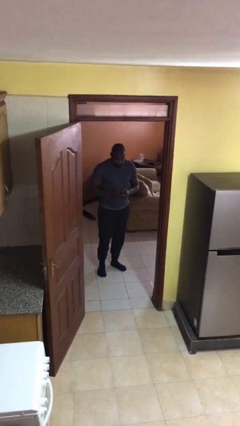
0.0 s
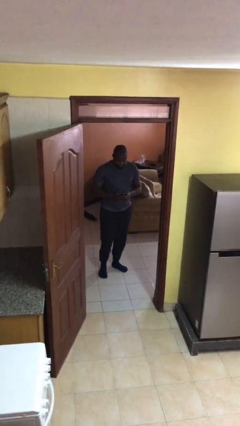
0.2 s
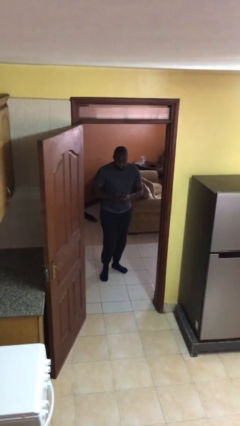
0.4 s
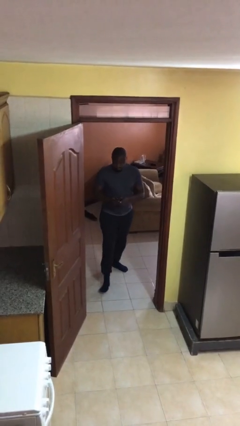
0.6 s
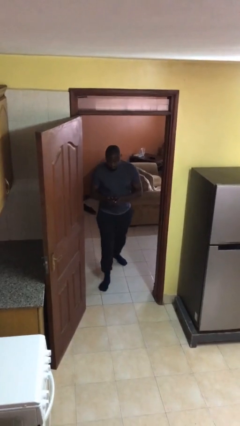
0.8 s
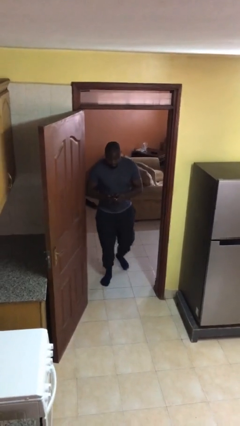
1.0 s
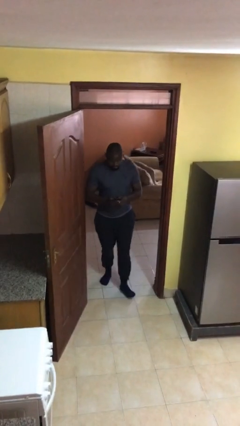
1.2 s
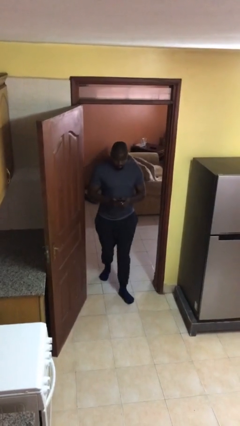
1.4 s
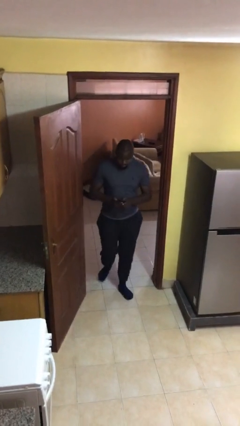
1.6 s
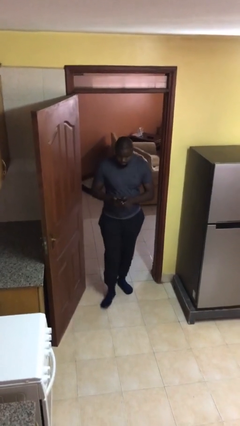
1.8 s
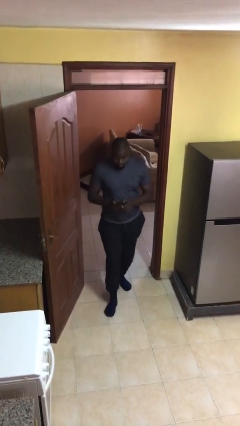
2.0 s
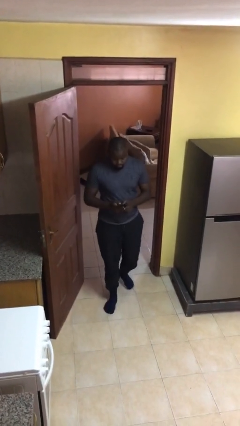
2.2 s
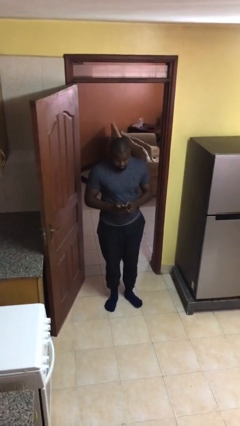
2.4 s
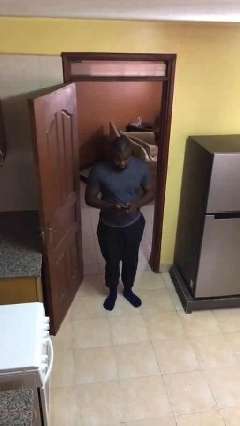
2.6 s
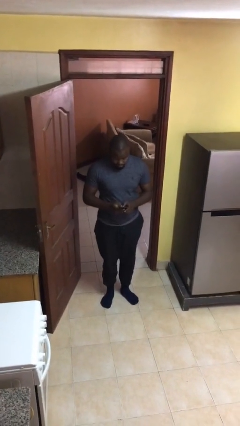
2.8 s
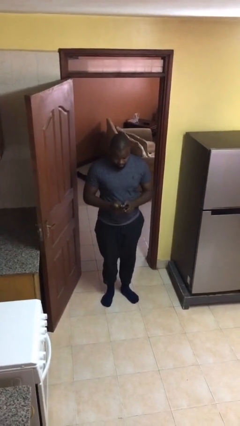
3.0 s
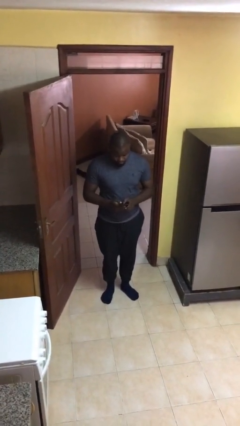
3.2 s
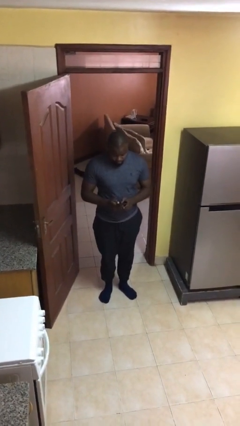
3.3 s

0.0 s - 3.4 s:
person enters scene through structure

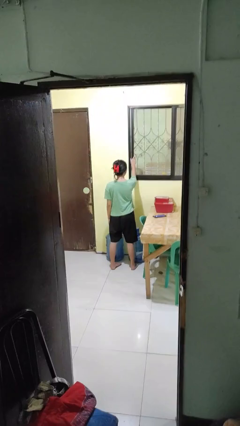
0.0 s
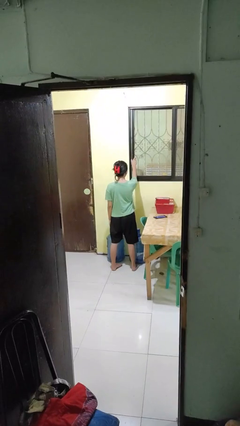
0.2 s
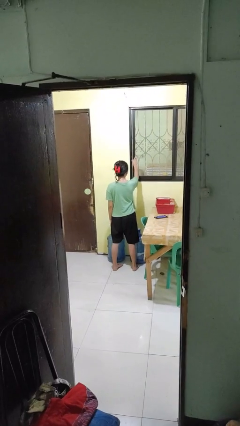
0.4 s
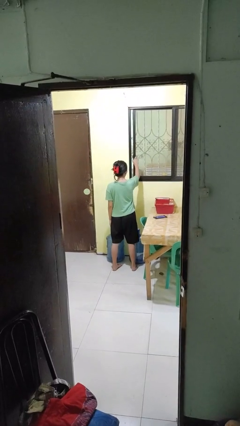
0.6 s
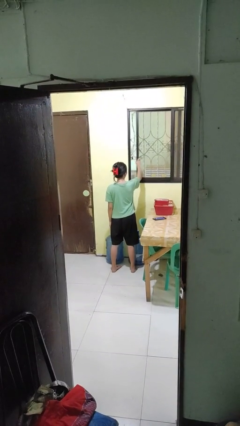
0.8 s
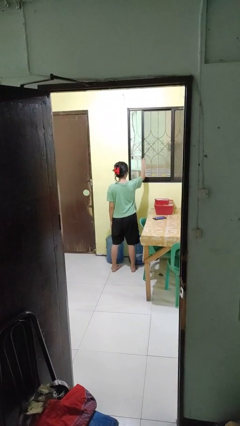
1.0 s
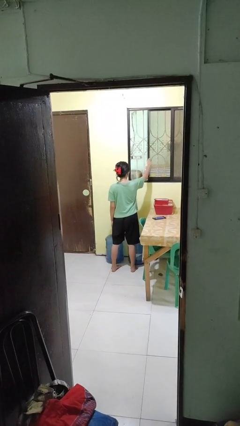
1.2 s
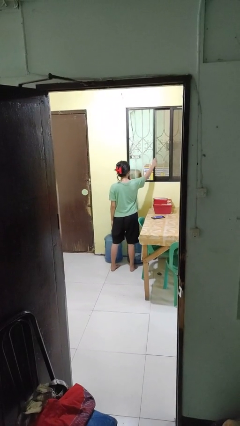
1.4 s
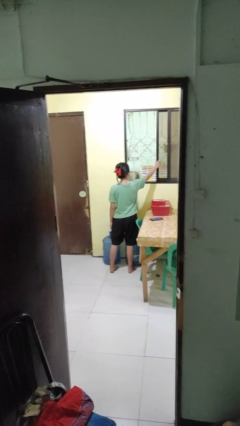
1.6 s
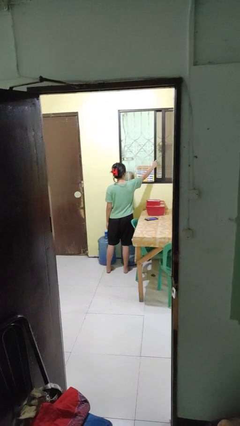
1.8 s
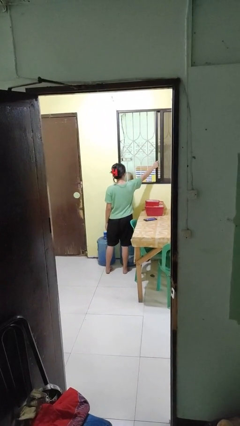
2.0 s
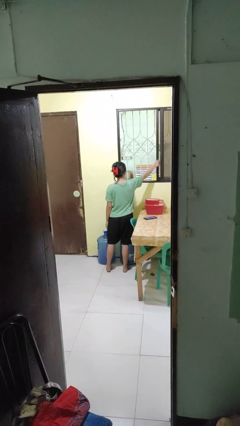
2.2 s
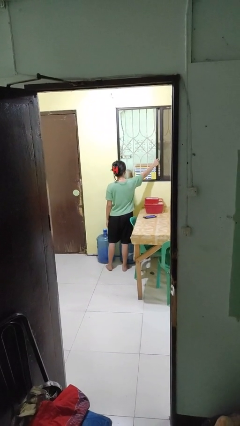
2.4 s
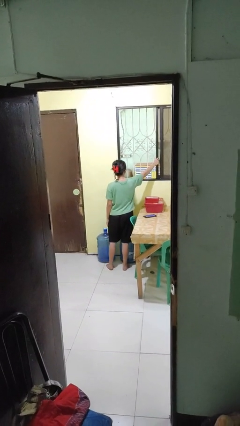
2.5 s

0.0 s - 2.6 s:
person opens home window

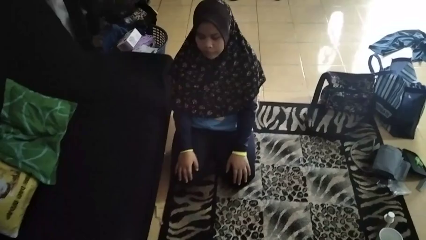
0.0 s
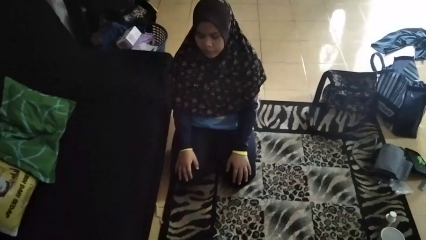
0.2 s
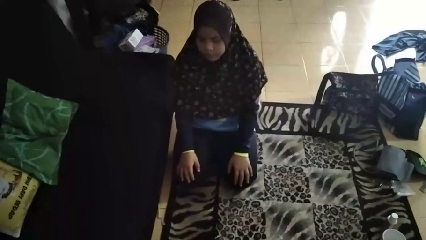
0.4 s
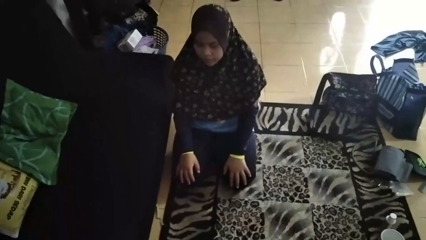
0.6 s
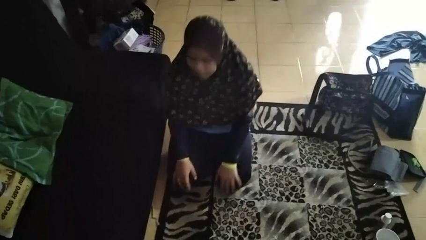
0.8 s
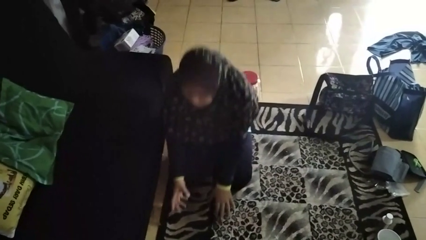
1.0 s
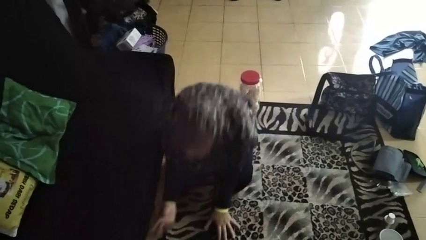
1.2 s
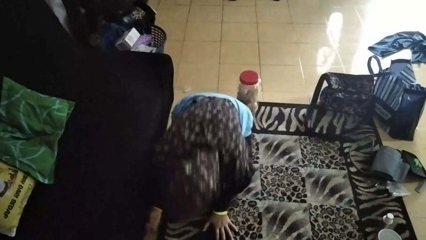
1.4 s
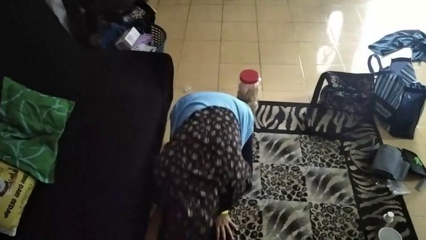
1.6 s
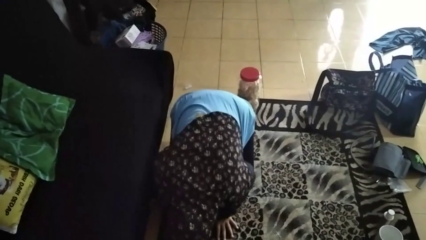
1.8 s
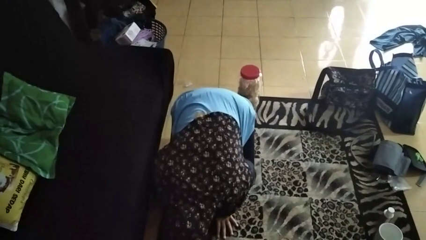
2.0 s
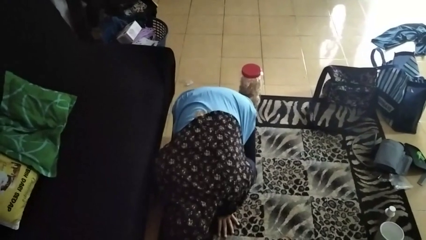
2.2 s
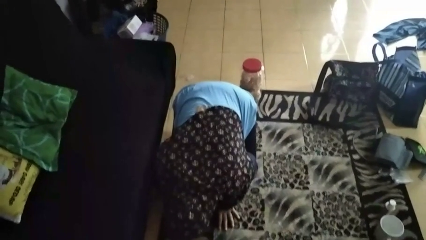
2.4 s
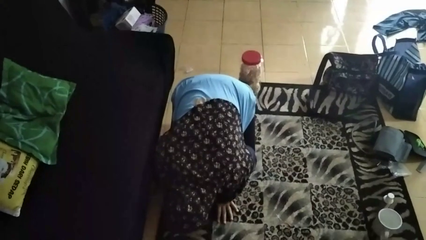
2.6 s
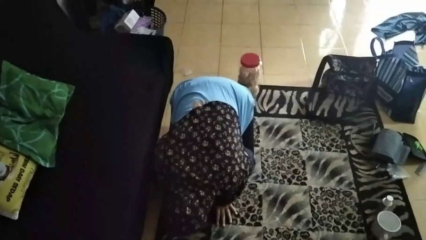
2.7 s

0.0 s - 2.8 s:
person searches under couch

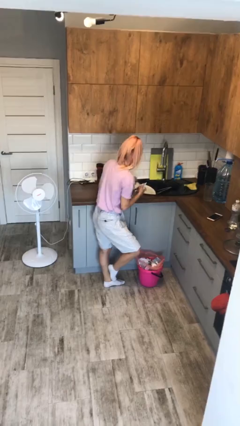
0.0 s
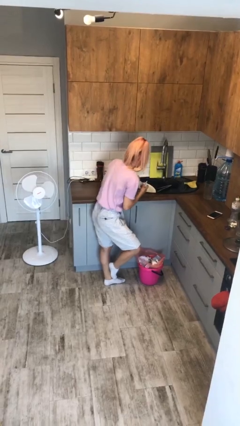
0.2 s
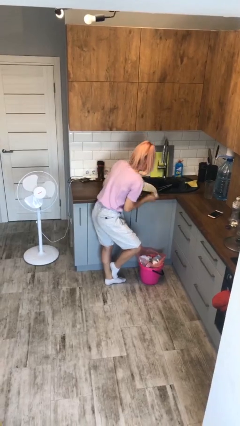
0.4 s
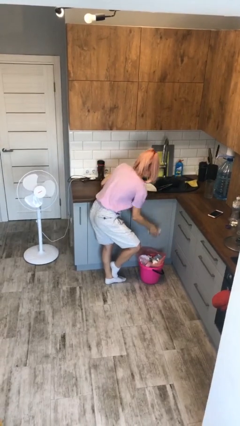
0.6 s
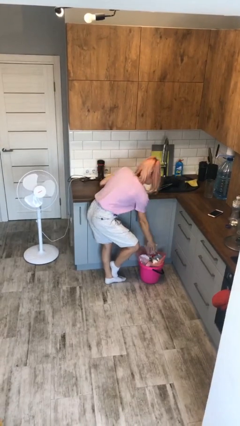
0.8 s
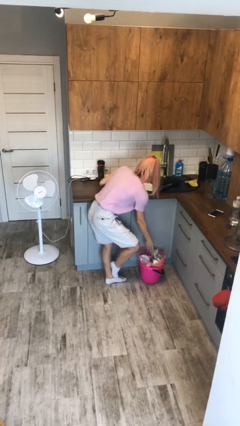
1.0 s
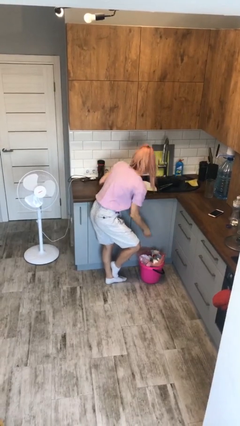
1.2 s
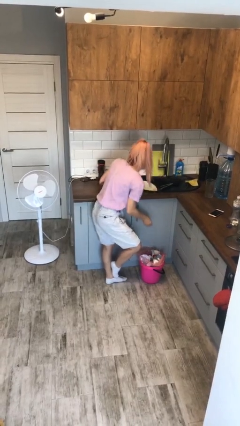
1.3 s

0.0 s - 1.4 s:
person discards trash

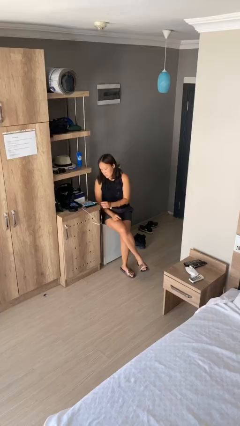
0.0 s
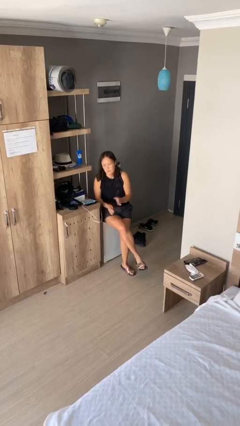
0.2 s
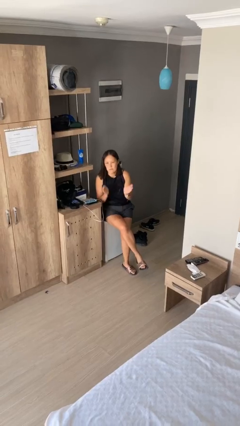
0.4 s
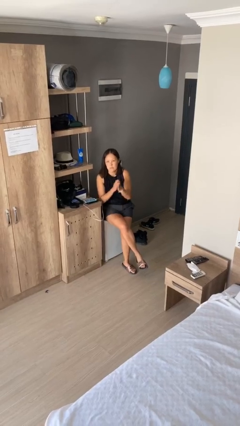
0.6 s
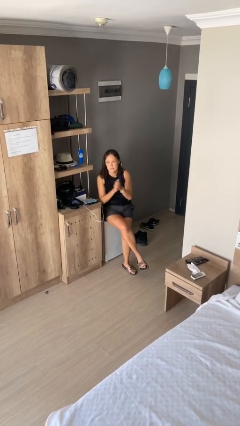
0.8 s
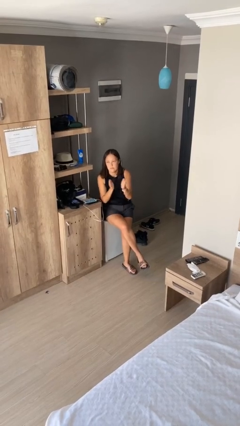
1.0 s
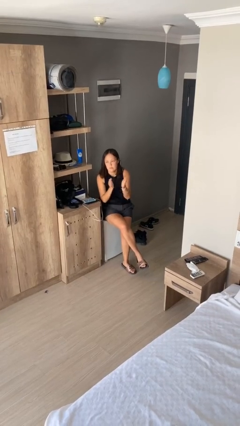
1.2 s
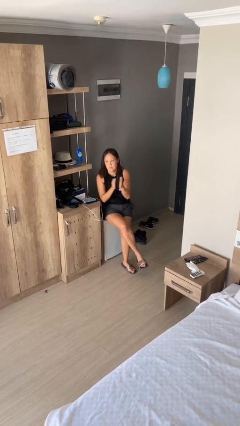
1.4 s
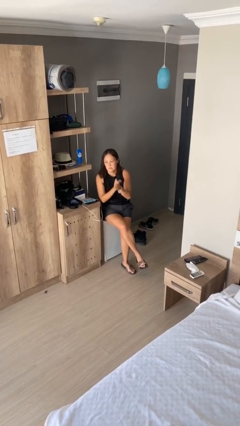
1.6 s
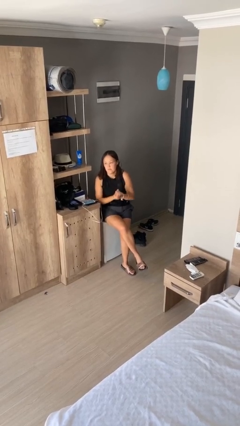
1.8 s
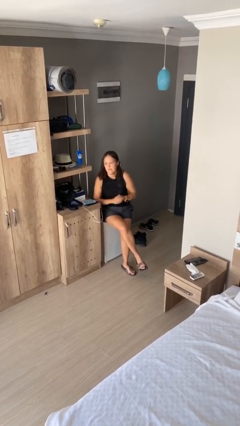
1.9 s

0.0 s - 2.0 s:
person claps hands

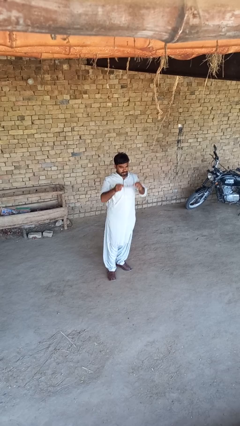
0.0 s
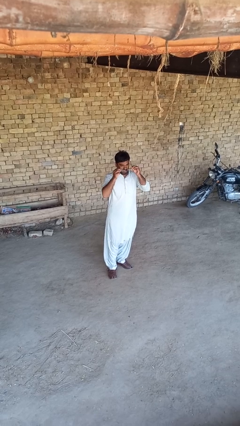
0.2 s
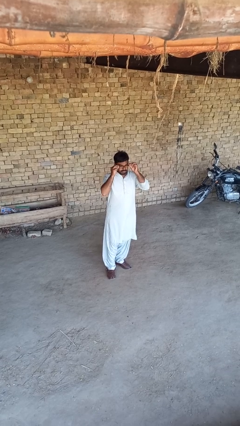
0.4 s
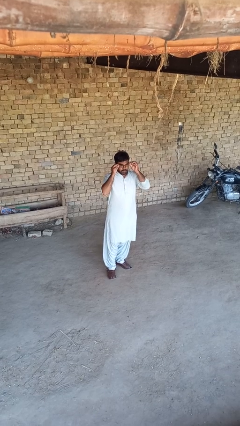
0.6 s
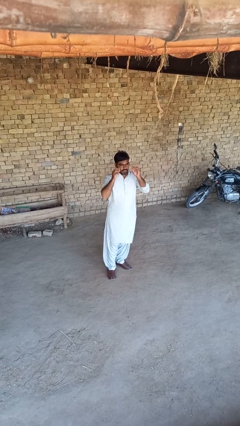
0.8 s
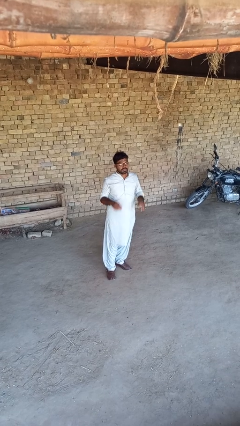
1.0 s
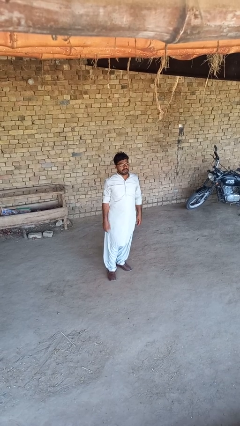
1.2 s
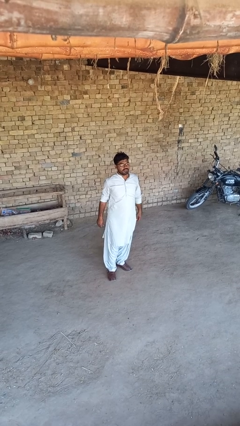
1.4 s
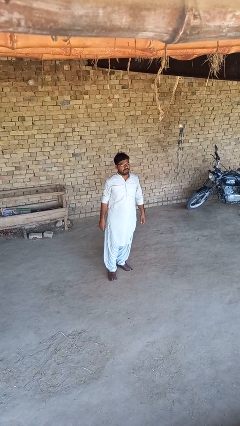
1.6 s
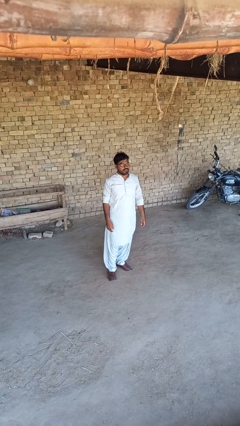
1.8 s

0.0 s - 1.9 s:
person puts on glasses

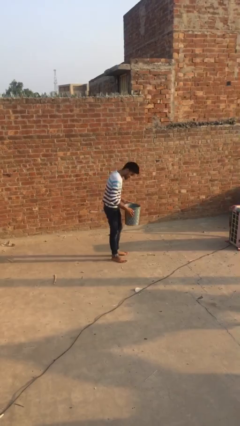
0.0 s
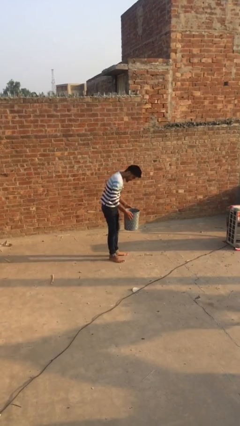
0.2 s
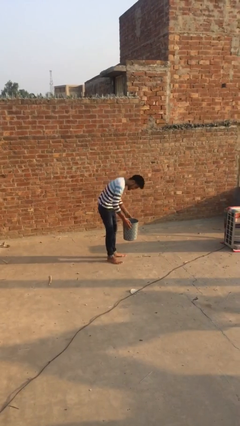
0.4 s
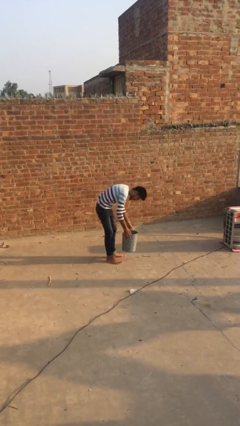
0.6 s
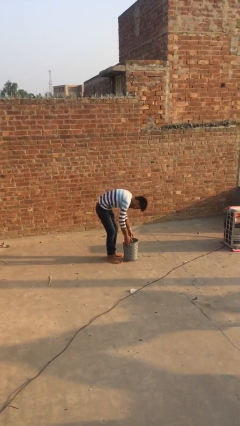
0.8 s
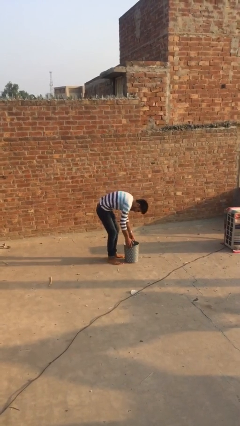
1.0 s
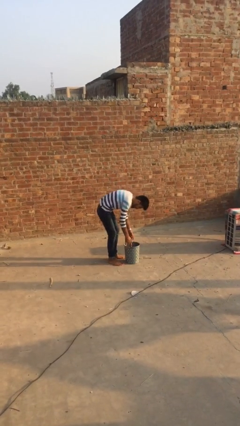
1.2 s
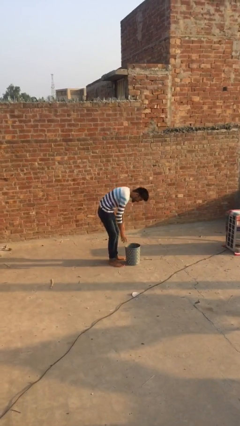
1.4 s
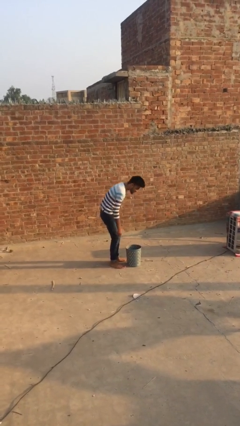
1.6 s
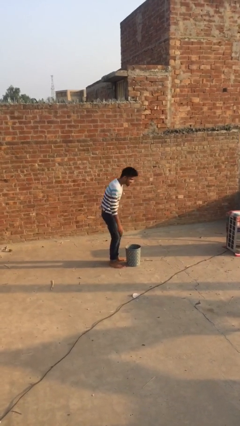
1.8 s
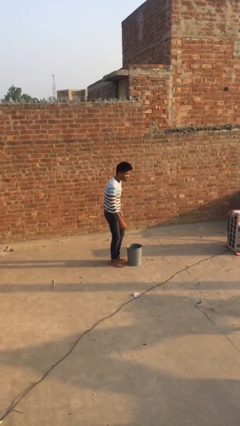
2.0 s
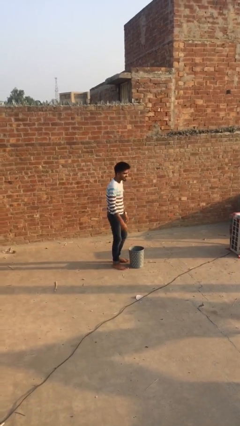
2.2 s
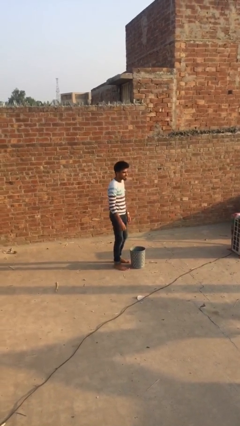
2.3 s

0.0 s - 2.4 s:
person puts down object on floor

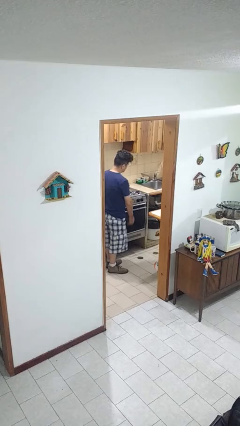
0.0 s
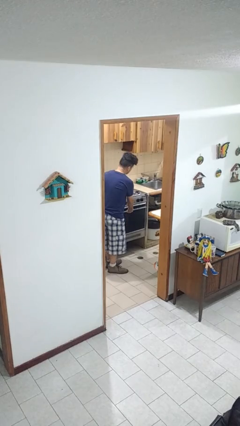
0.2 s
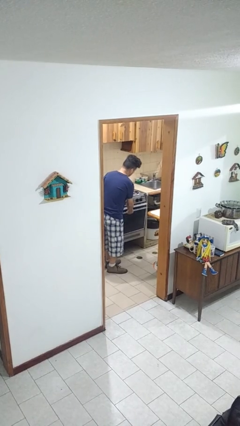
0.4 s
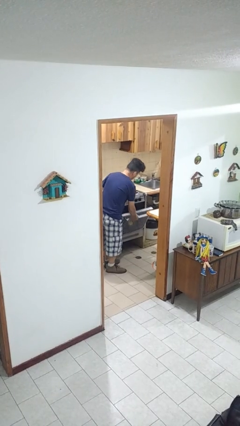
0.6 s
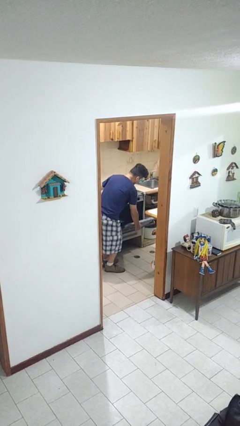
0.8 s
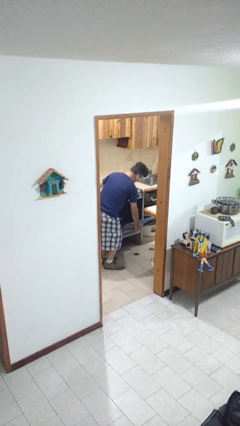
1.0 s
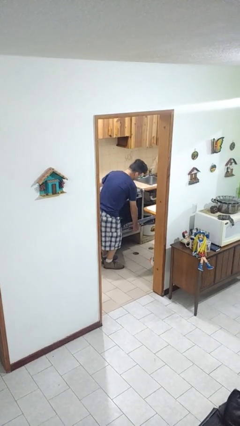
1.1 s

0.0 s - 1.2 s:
person opens oven door
